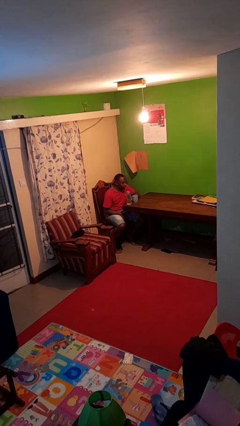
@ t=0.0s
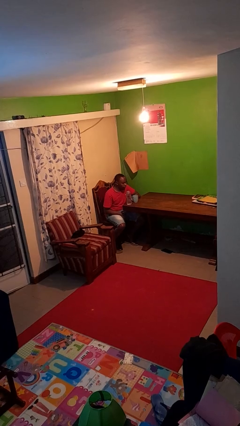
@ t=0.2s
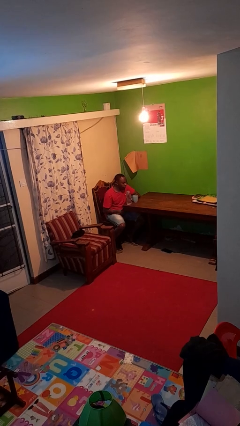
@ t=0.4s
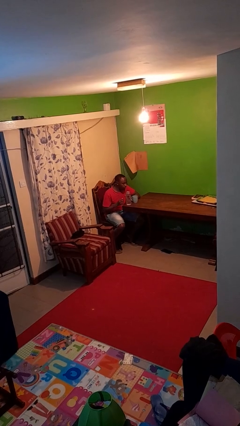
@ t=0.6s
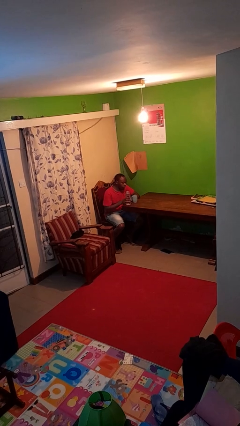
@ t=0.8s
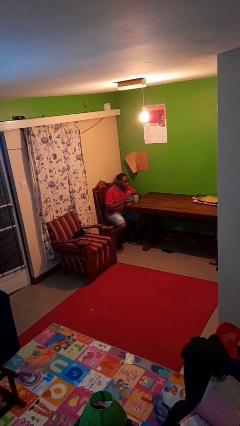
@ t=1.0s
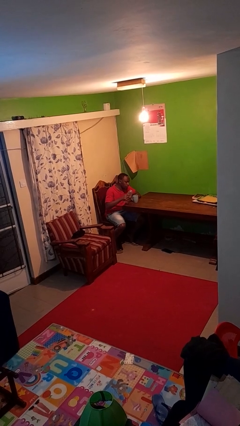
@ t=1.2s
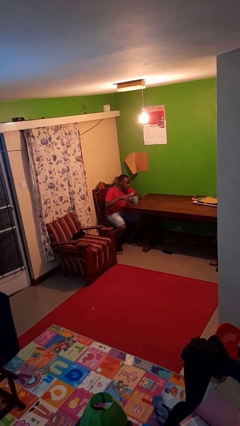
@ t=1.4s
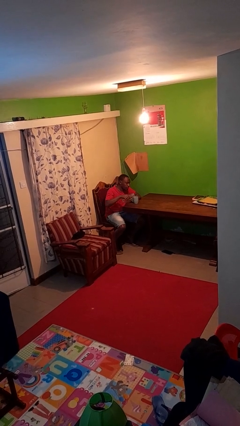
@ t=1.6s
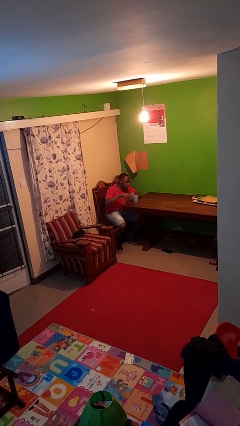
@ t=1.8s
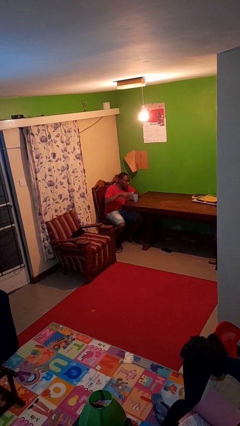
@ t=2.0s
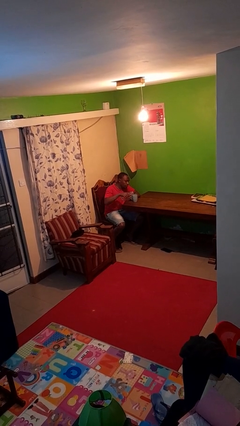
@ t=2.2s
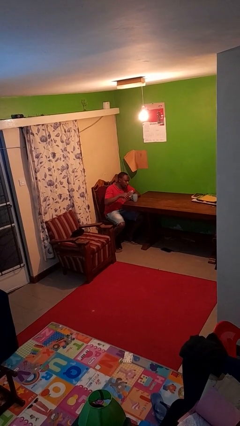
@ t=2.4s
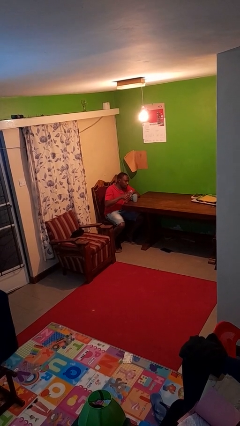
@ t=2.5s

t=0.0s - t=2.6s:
person pours liquid into cup

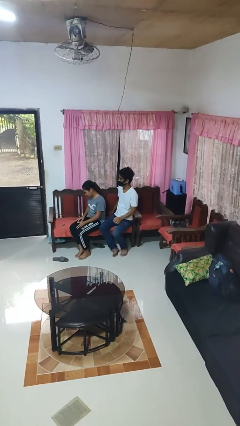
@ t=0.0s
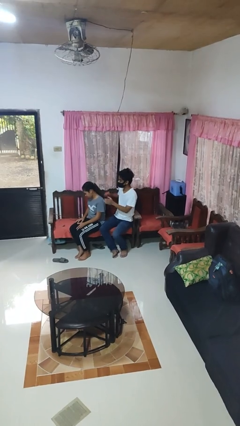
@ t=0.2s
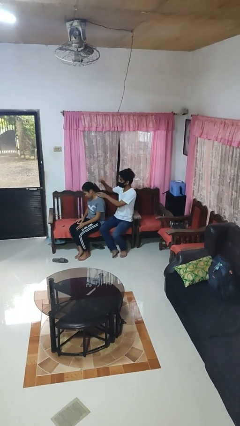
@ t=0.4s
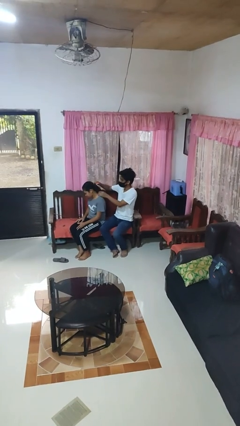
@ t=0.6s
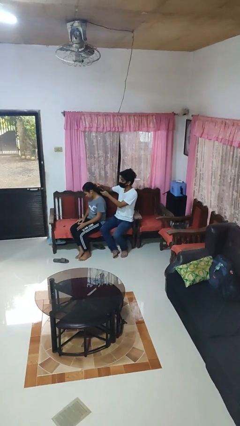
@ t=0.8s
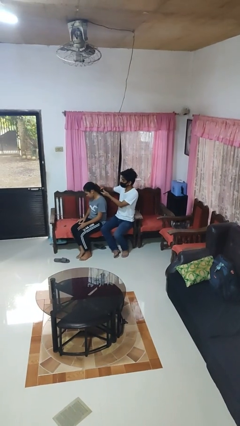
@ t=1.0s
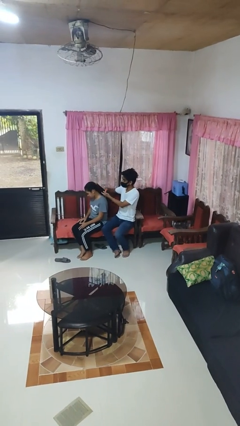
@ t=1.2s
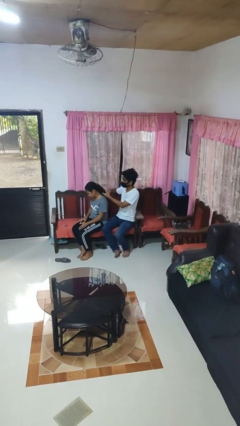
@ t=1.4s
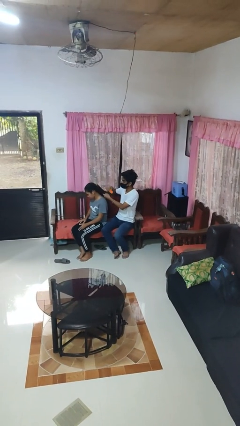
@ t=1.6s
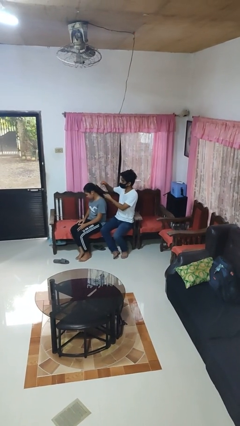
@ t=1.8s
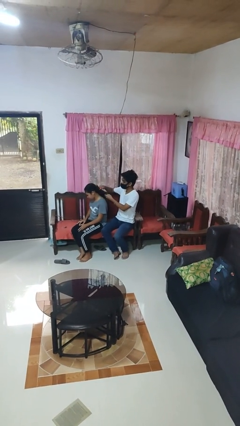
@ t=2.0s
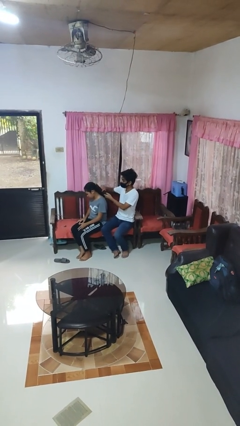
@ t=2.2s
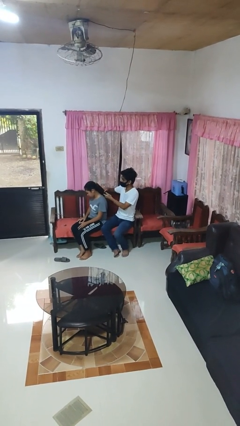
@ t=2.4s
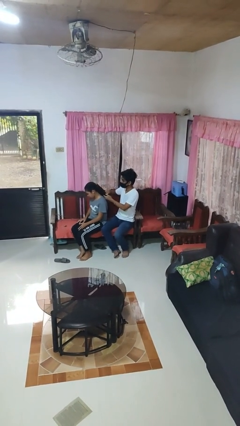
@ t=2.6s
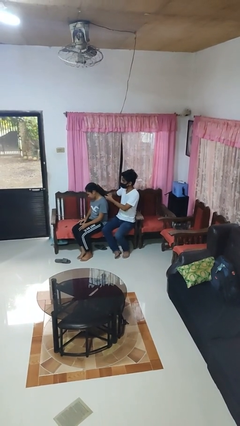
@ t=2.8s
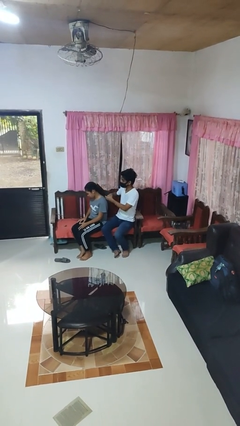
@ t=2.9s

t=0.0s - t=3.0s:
person brushes hair of person

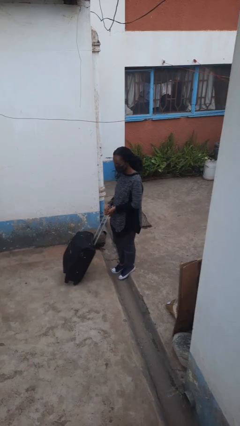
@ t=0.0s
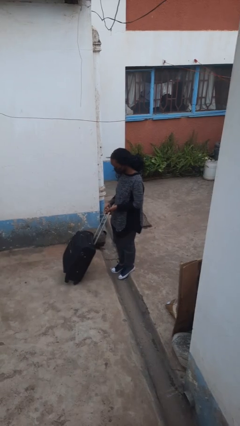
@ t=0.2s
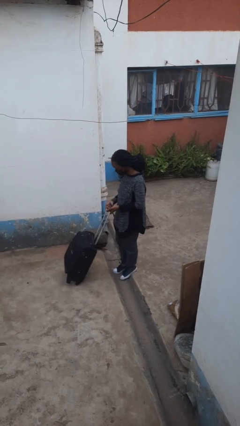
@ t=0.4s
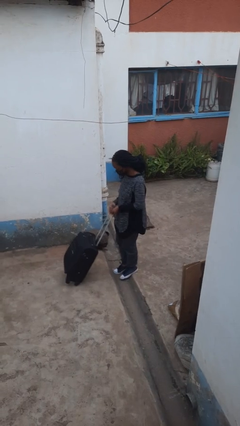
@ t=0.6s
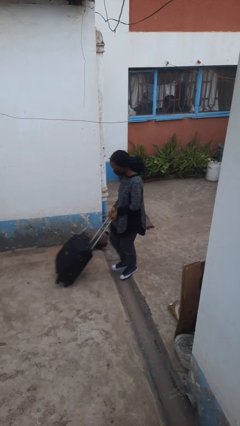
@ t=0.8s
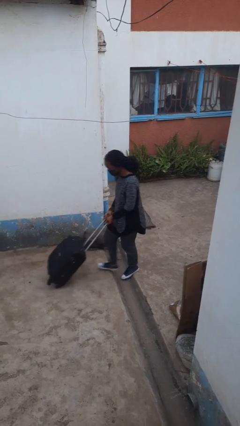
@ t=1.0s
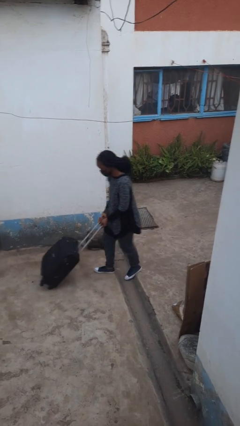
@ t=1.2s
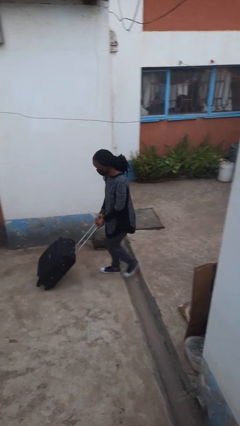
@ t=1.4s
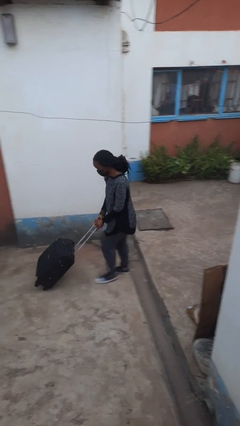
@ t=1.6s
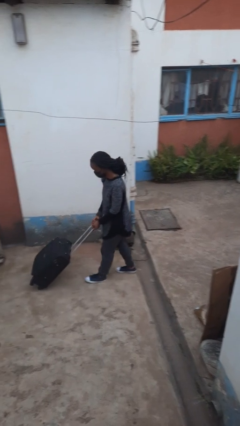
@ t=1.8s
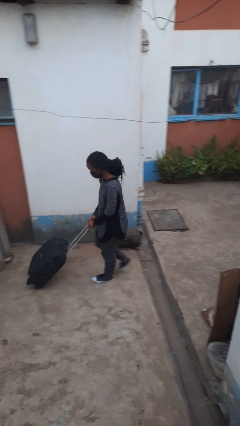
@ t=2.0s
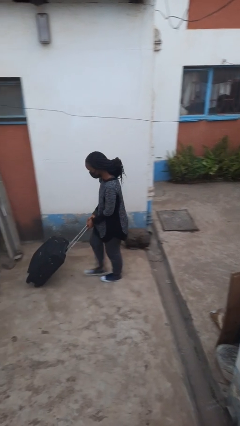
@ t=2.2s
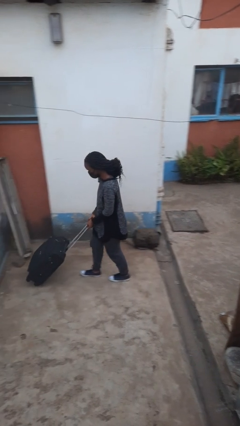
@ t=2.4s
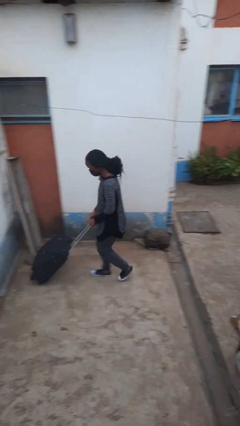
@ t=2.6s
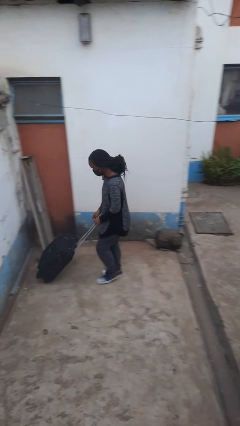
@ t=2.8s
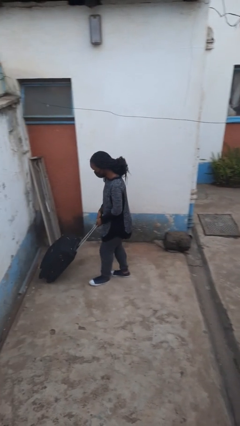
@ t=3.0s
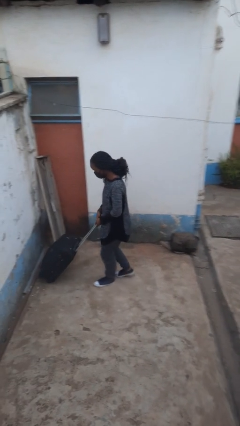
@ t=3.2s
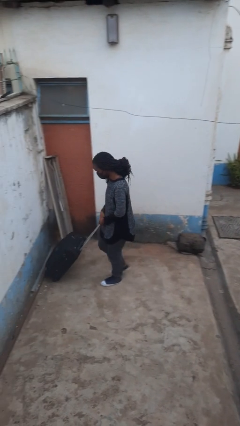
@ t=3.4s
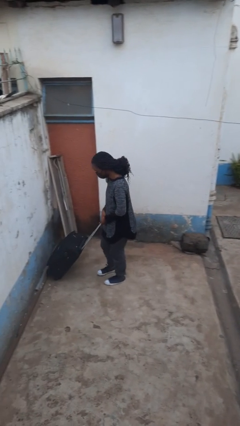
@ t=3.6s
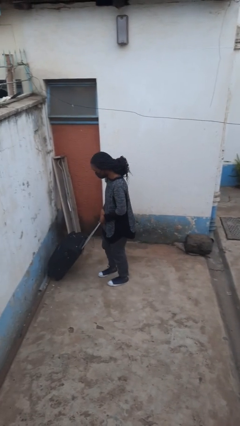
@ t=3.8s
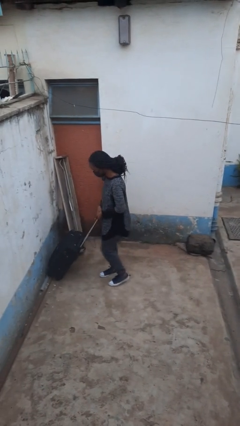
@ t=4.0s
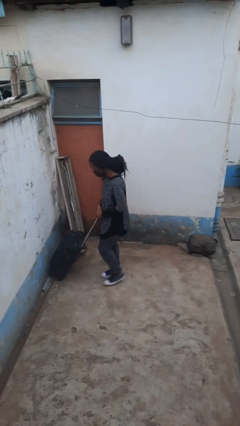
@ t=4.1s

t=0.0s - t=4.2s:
person pushes wheeled cart

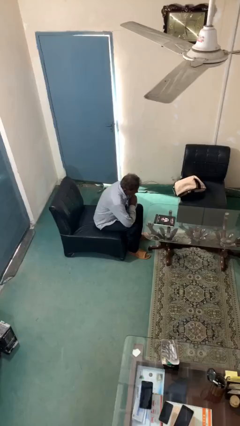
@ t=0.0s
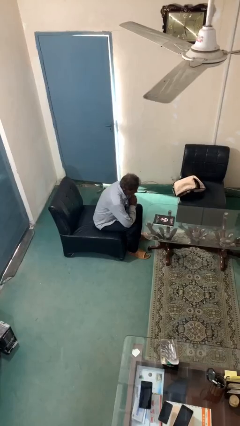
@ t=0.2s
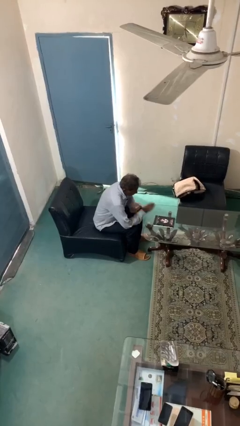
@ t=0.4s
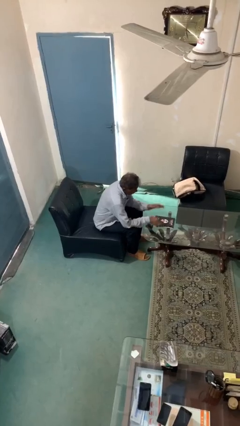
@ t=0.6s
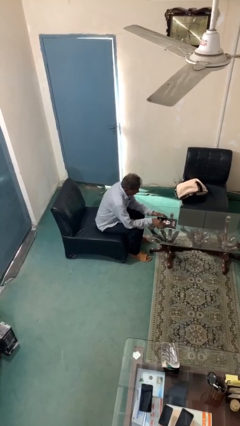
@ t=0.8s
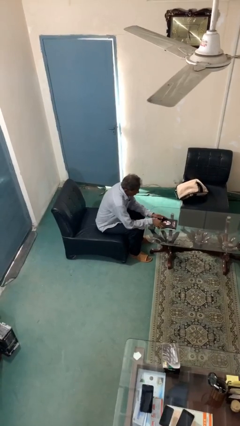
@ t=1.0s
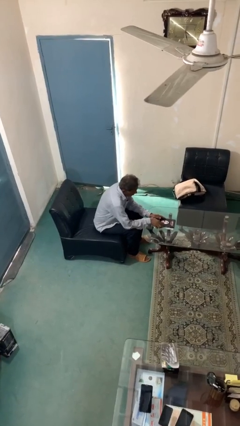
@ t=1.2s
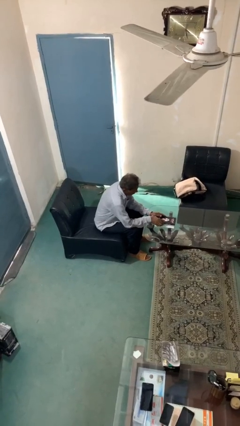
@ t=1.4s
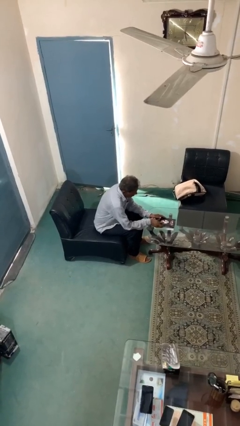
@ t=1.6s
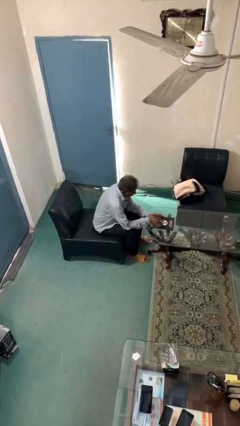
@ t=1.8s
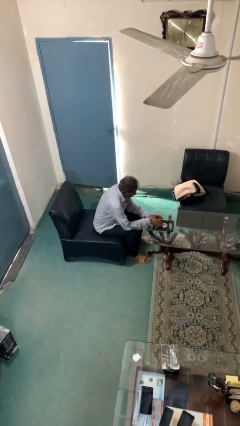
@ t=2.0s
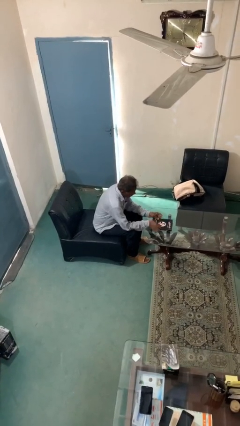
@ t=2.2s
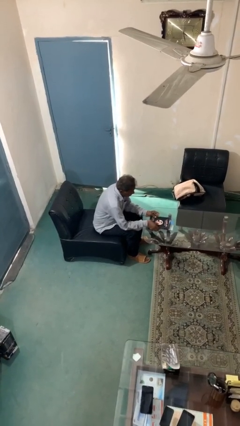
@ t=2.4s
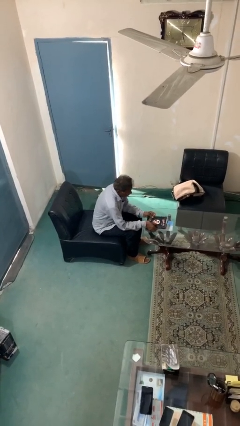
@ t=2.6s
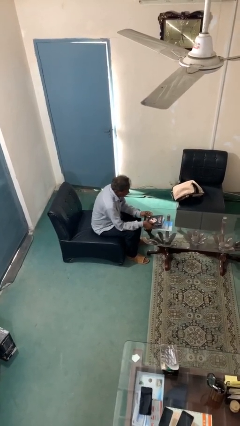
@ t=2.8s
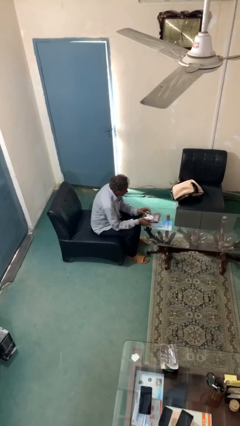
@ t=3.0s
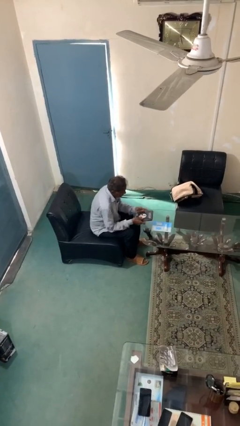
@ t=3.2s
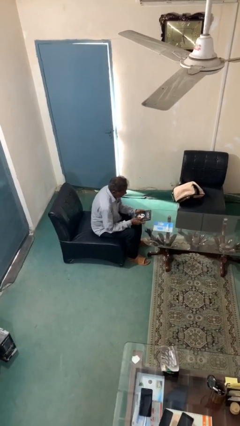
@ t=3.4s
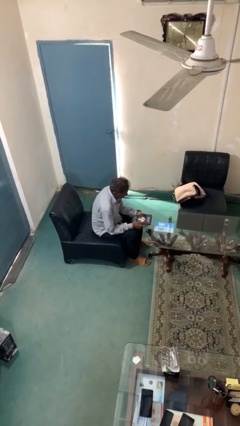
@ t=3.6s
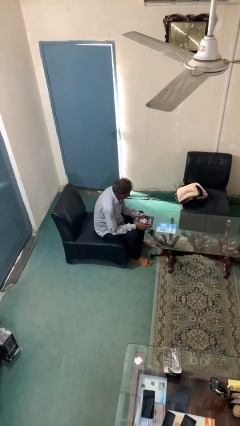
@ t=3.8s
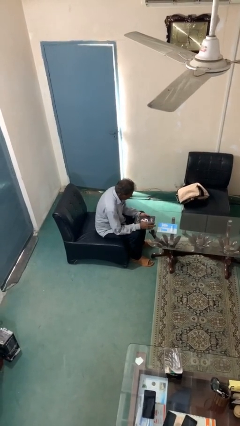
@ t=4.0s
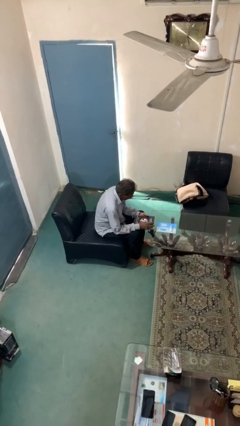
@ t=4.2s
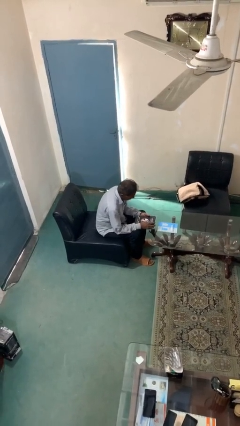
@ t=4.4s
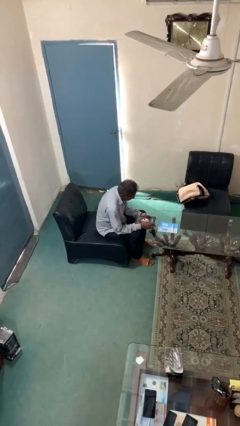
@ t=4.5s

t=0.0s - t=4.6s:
person picks up object from table

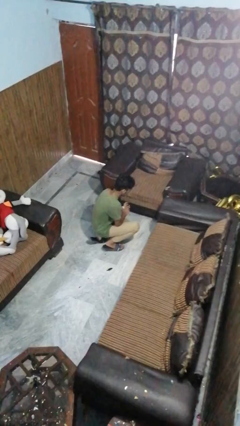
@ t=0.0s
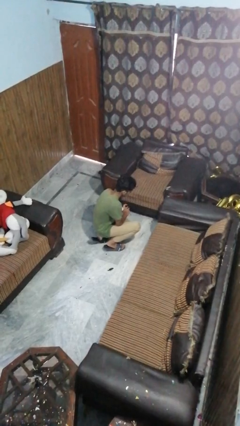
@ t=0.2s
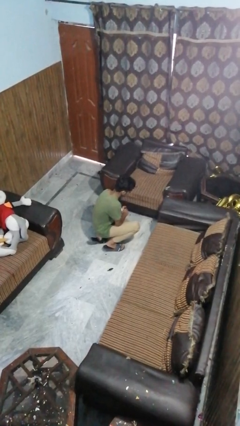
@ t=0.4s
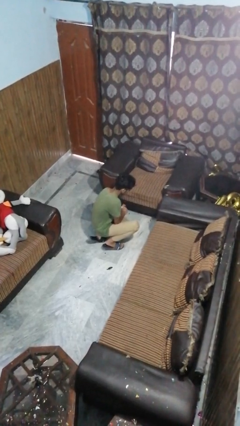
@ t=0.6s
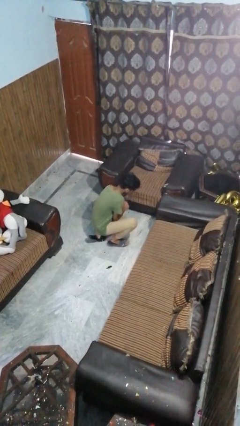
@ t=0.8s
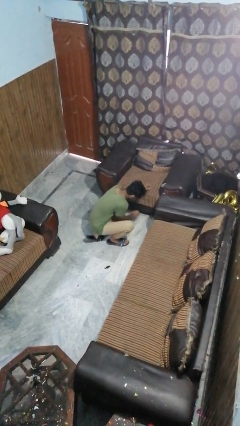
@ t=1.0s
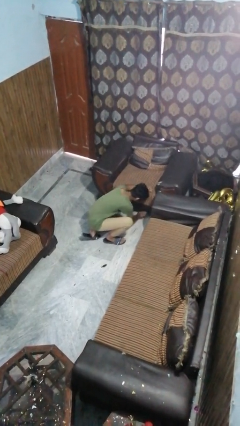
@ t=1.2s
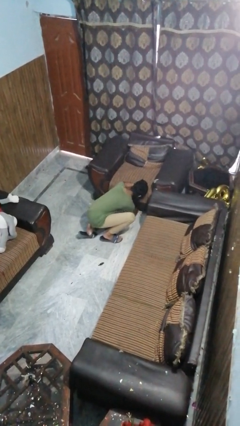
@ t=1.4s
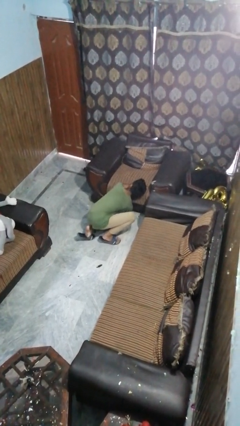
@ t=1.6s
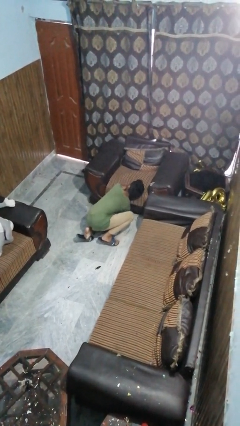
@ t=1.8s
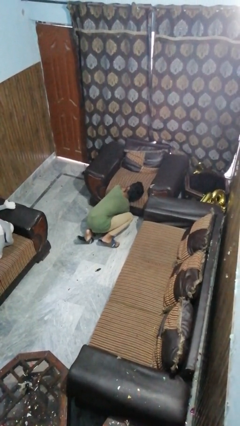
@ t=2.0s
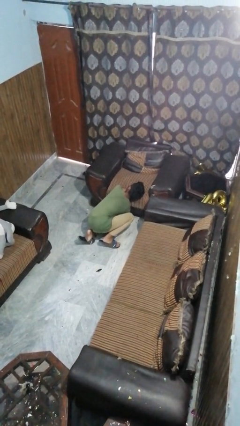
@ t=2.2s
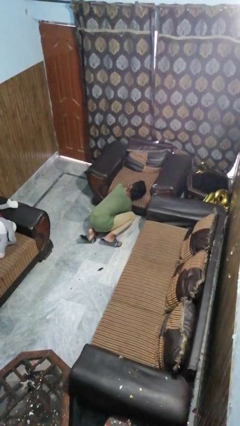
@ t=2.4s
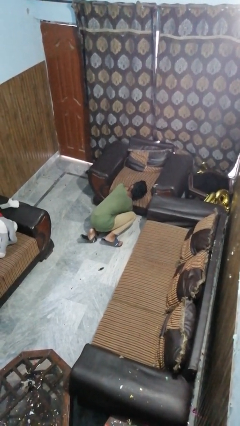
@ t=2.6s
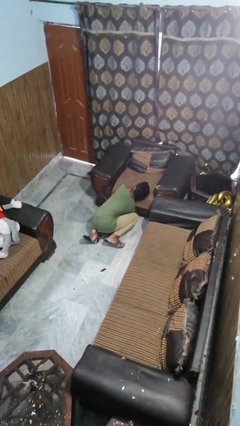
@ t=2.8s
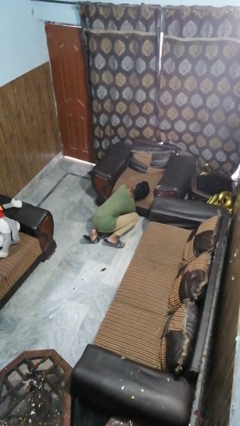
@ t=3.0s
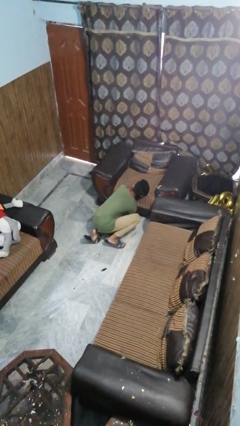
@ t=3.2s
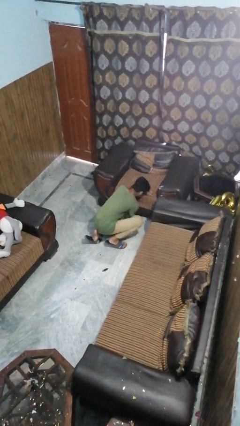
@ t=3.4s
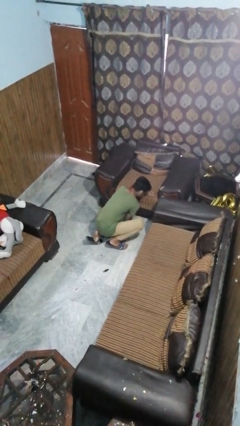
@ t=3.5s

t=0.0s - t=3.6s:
person searches under couch
